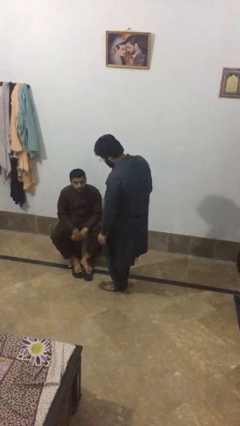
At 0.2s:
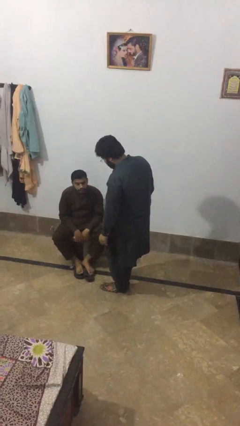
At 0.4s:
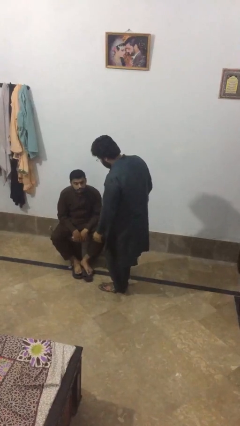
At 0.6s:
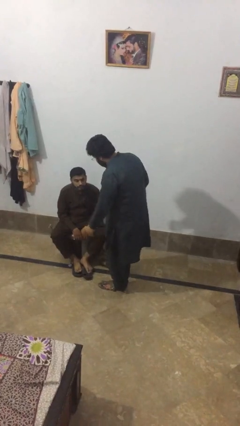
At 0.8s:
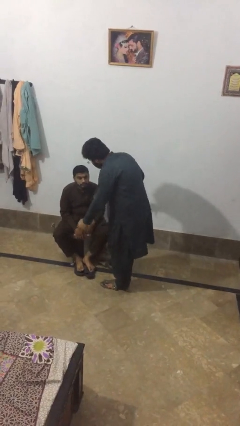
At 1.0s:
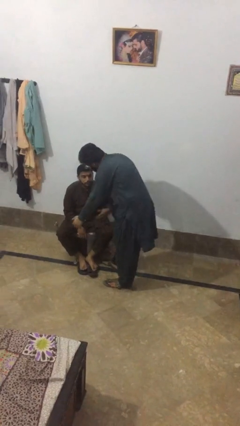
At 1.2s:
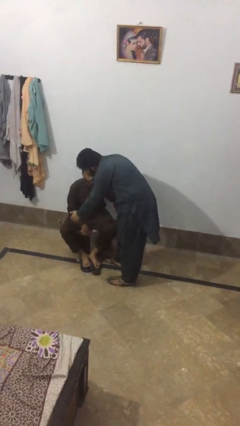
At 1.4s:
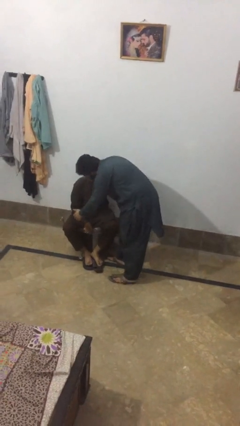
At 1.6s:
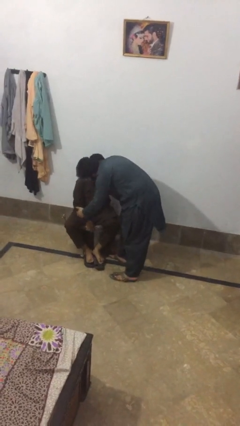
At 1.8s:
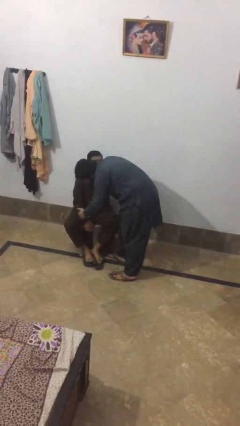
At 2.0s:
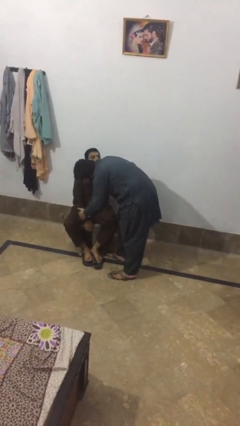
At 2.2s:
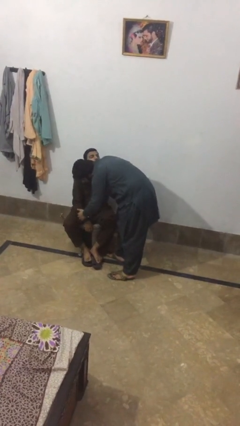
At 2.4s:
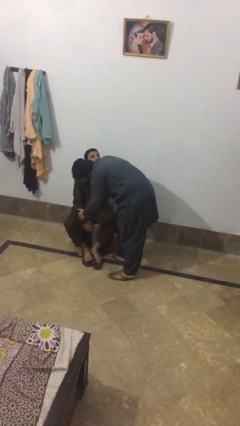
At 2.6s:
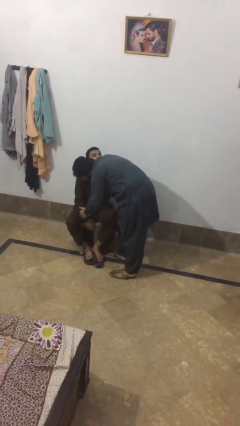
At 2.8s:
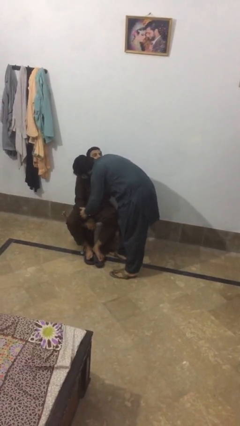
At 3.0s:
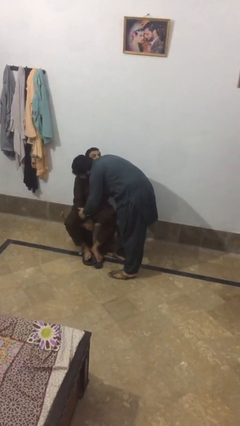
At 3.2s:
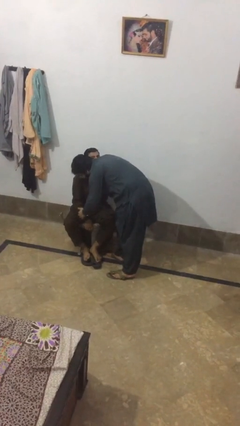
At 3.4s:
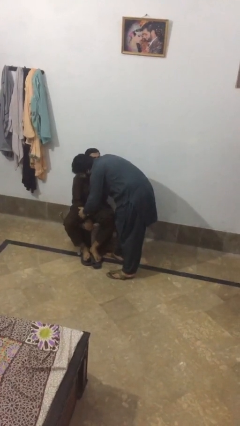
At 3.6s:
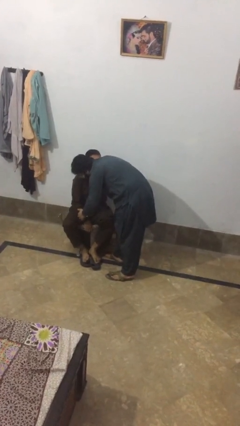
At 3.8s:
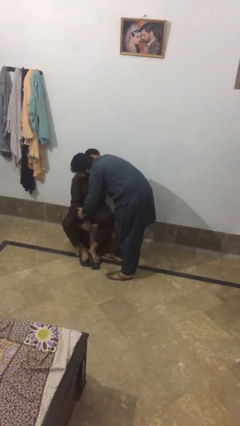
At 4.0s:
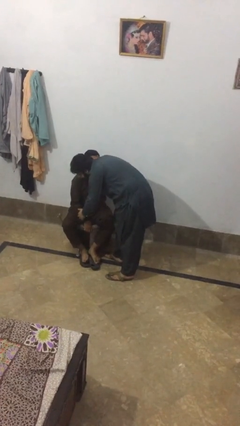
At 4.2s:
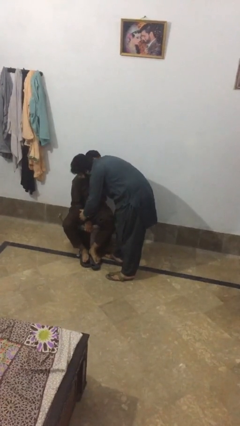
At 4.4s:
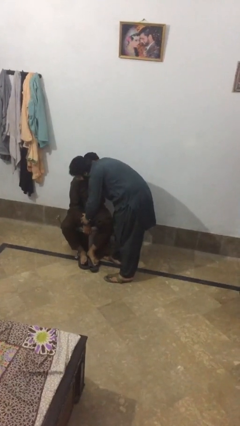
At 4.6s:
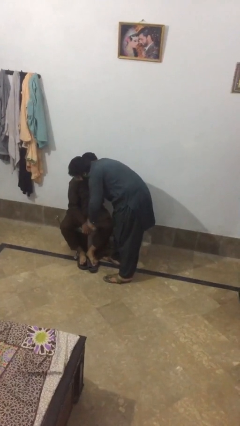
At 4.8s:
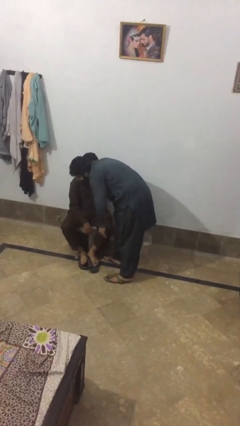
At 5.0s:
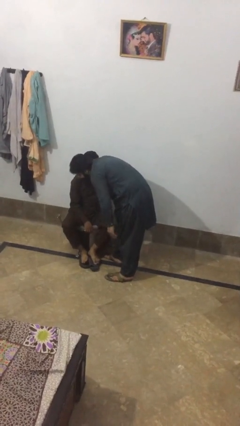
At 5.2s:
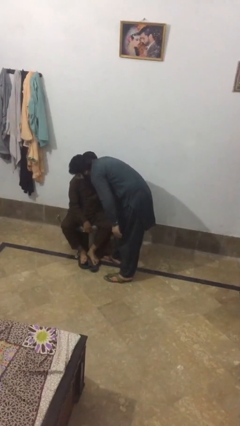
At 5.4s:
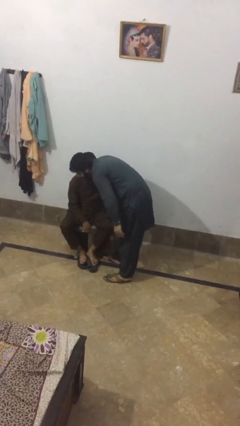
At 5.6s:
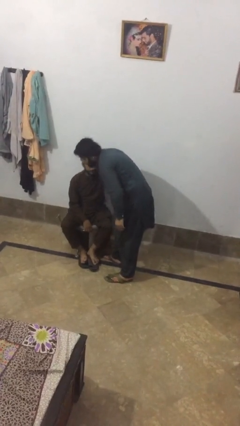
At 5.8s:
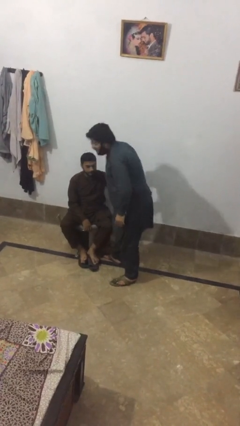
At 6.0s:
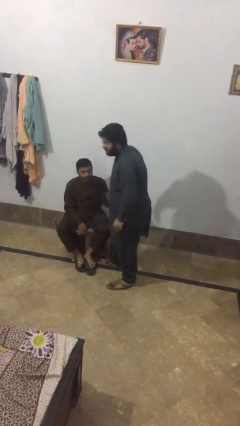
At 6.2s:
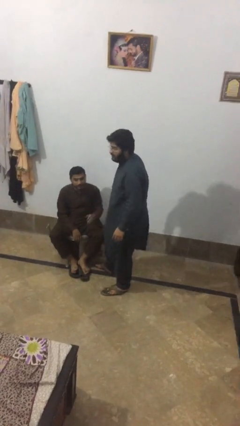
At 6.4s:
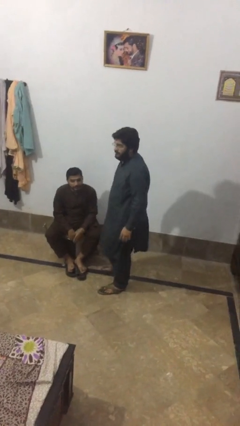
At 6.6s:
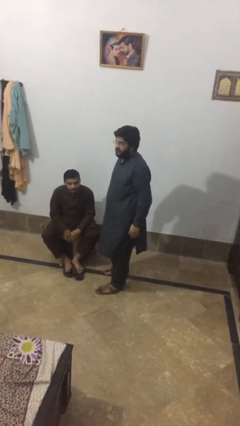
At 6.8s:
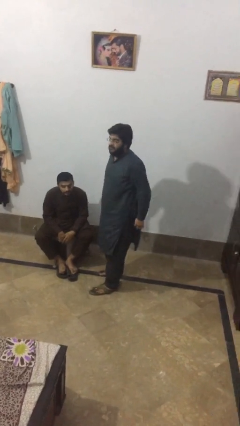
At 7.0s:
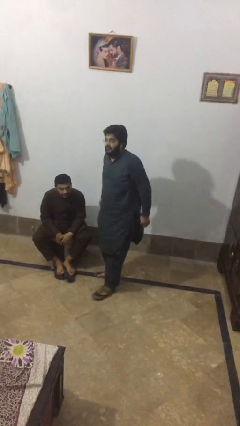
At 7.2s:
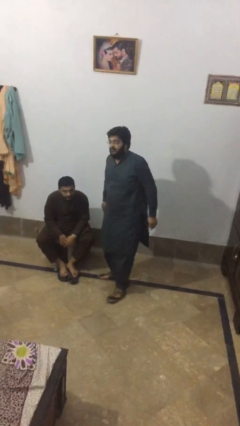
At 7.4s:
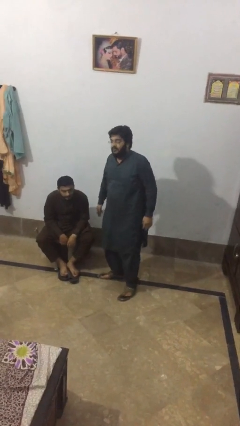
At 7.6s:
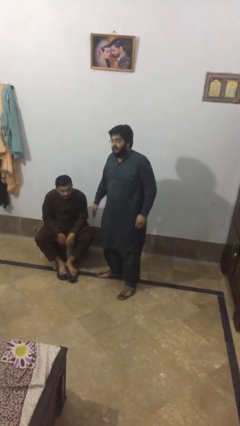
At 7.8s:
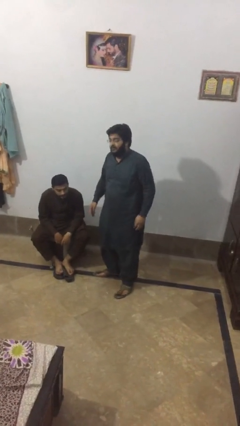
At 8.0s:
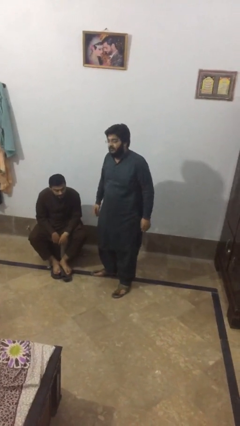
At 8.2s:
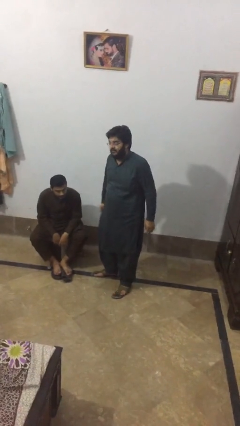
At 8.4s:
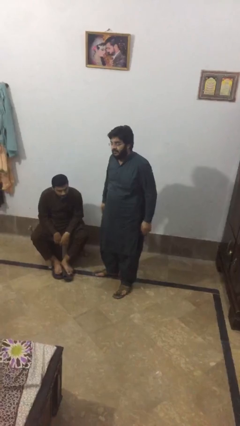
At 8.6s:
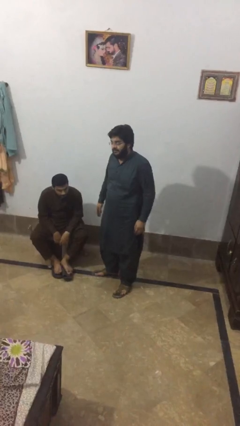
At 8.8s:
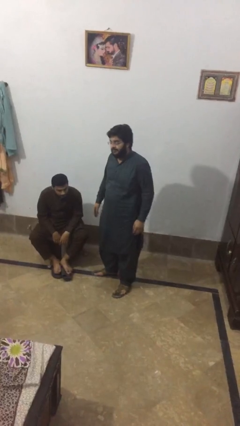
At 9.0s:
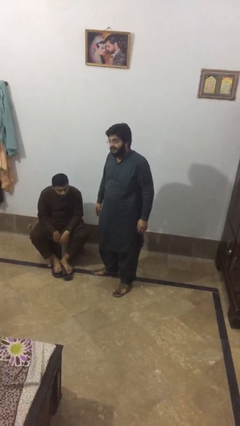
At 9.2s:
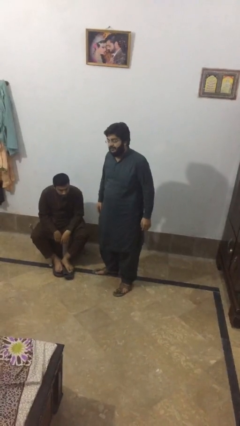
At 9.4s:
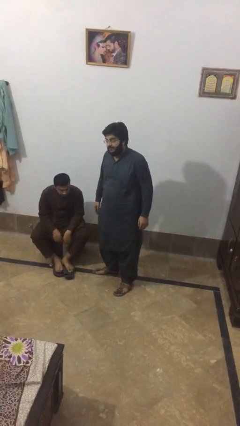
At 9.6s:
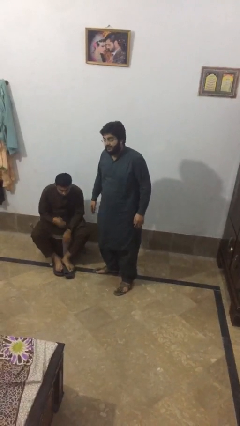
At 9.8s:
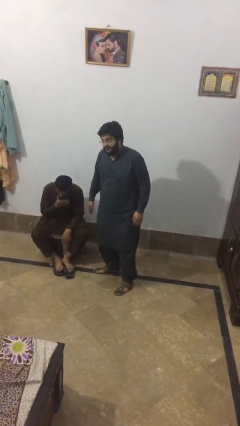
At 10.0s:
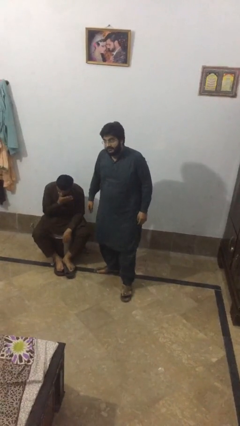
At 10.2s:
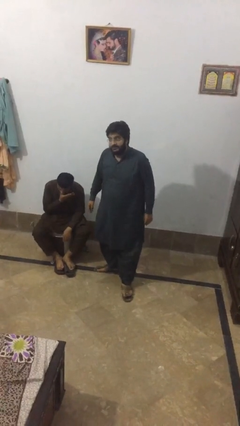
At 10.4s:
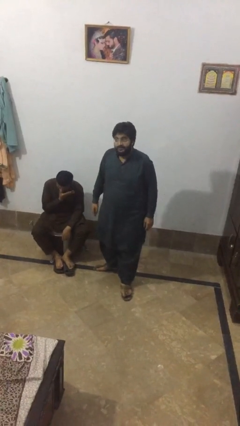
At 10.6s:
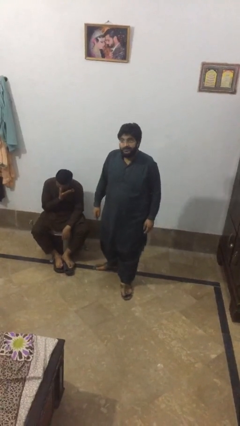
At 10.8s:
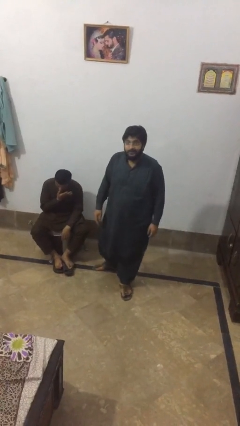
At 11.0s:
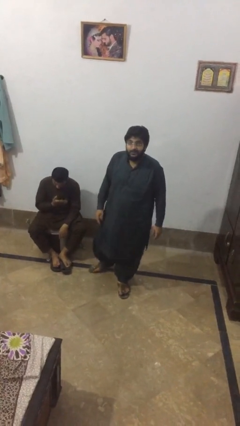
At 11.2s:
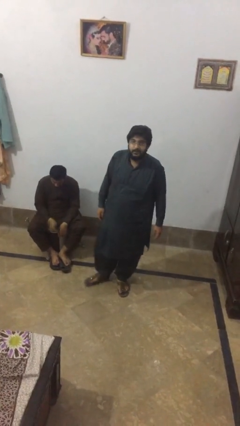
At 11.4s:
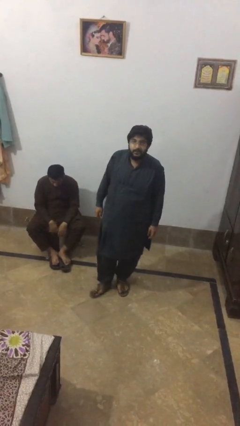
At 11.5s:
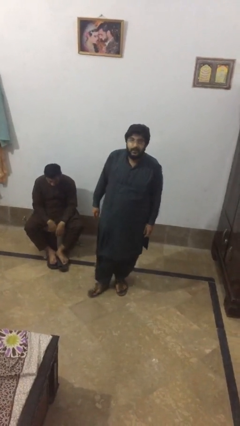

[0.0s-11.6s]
person embraces person

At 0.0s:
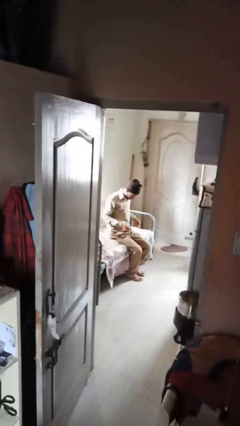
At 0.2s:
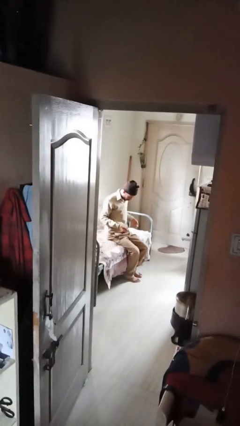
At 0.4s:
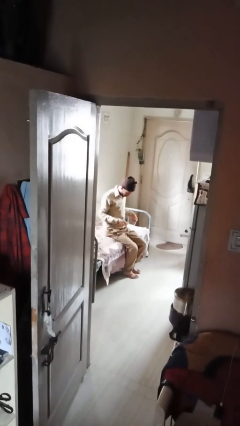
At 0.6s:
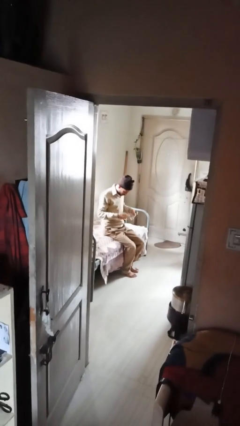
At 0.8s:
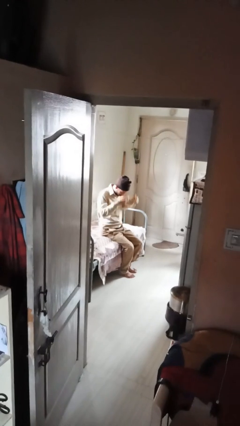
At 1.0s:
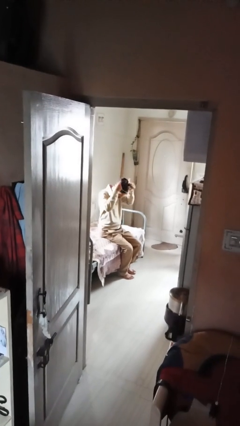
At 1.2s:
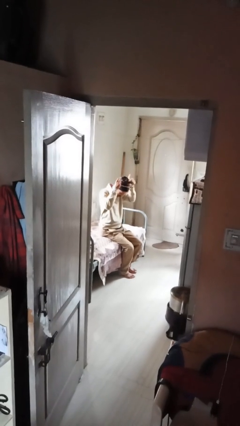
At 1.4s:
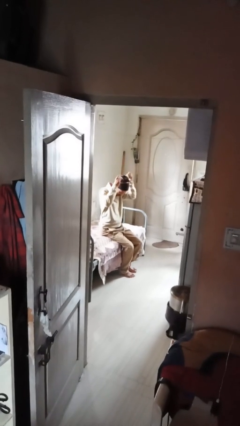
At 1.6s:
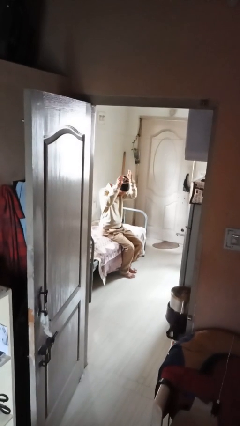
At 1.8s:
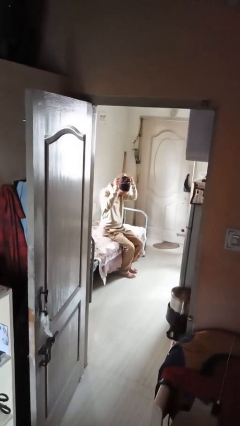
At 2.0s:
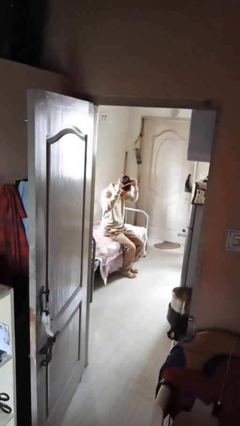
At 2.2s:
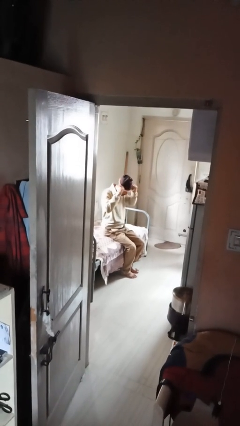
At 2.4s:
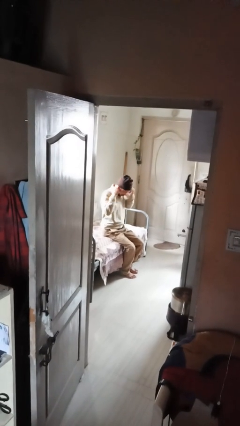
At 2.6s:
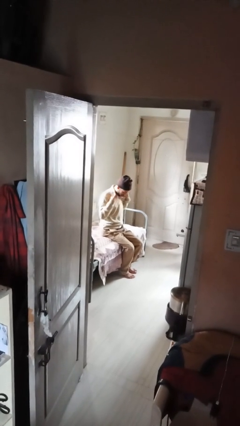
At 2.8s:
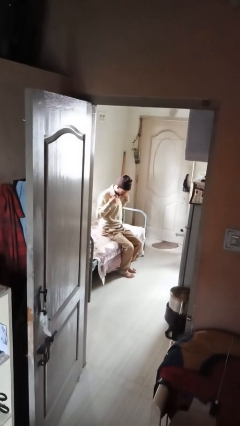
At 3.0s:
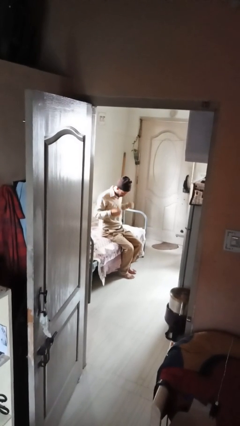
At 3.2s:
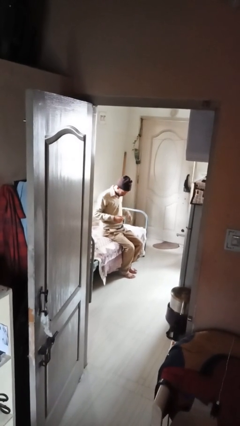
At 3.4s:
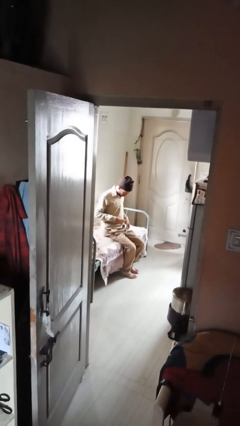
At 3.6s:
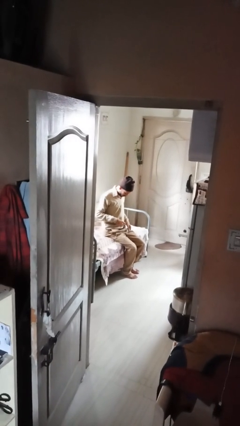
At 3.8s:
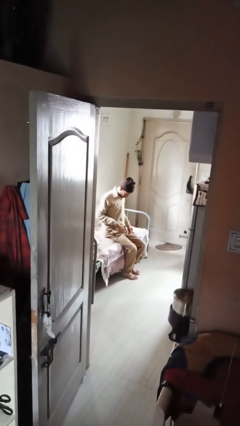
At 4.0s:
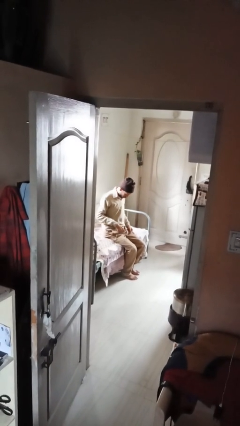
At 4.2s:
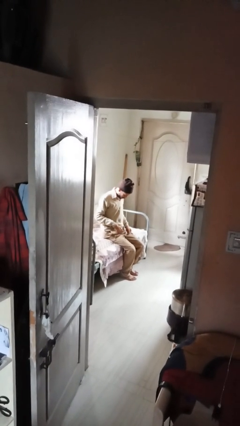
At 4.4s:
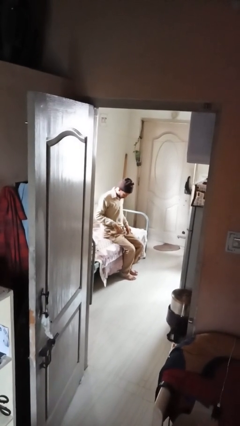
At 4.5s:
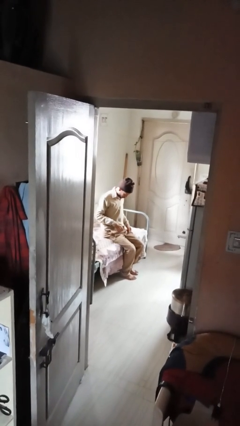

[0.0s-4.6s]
person puts on necklace

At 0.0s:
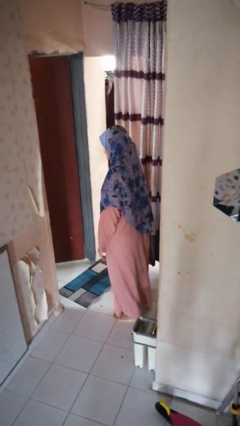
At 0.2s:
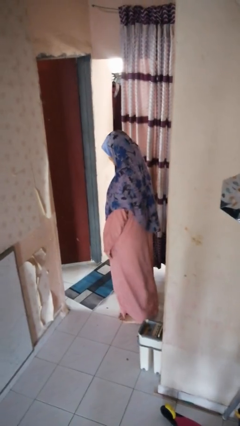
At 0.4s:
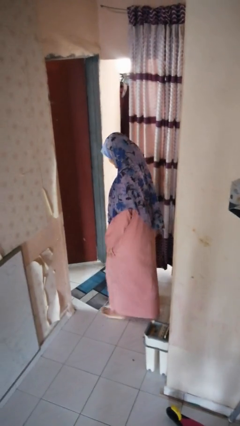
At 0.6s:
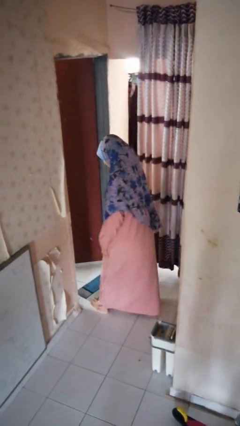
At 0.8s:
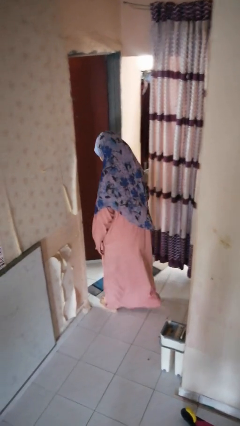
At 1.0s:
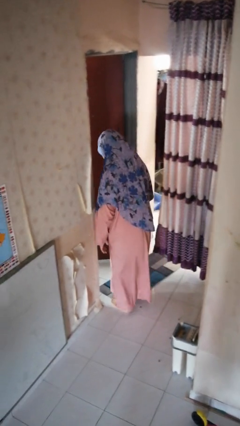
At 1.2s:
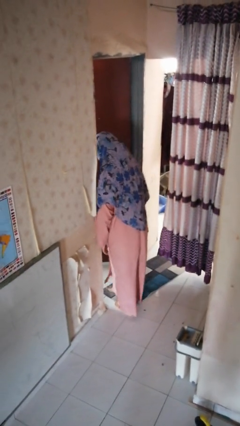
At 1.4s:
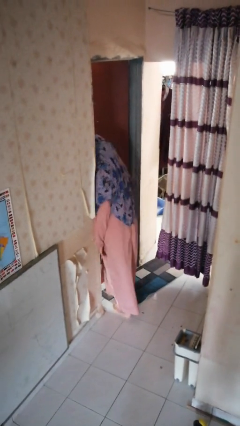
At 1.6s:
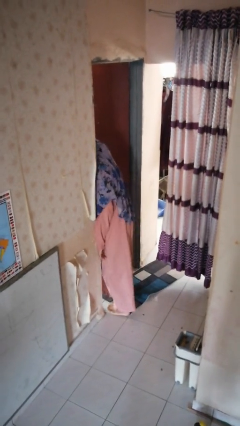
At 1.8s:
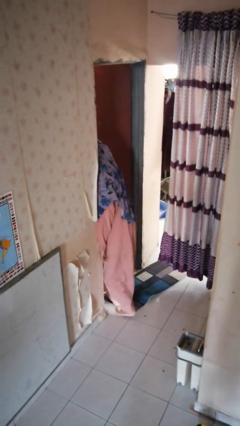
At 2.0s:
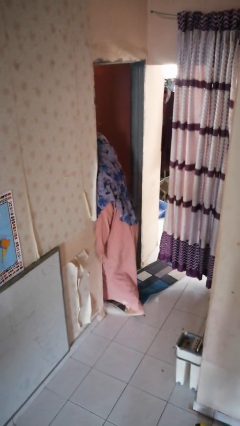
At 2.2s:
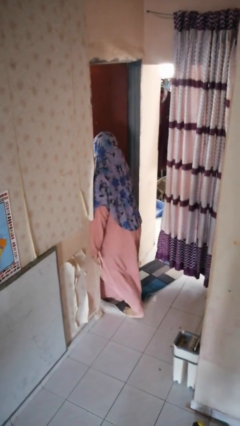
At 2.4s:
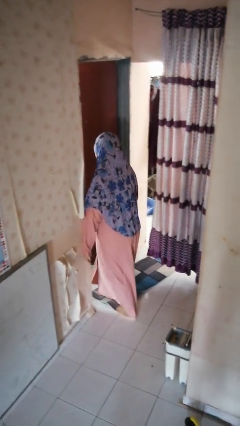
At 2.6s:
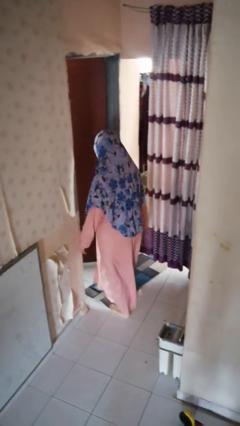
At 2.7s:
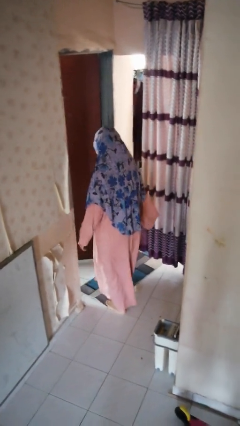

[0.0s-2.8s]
person bumps into wall
